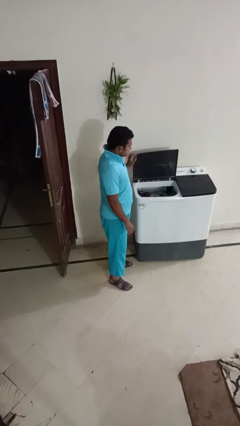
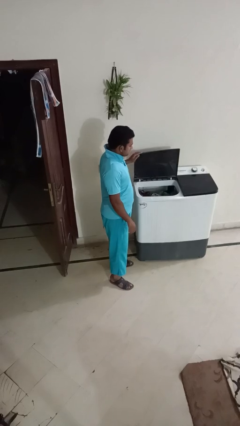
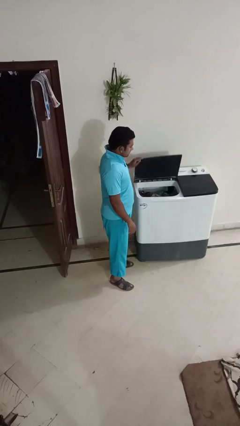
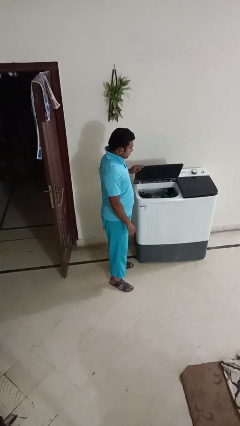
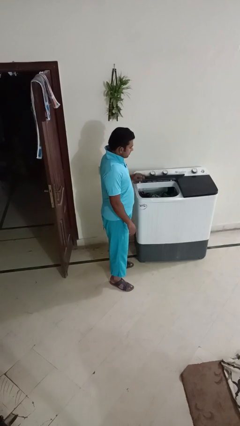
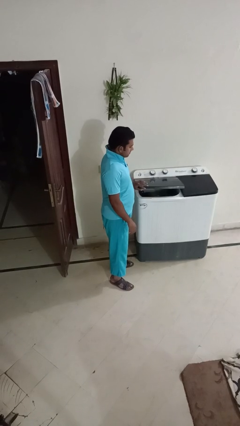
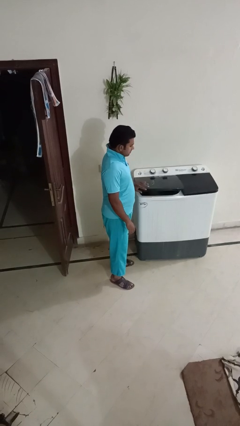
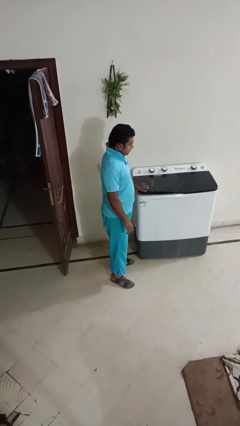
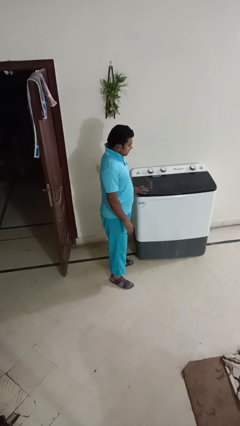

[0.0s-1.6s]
person closes clothes washer

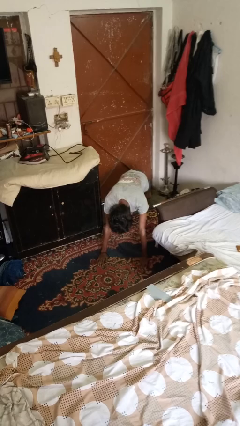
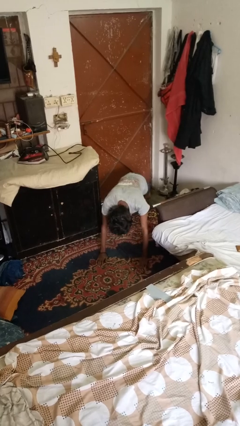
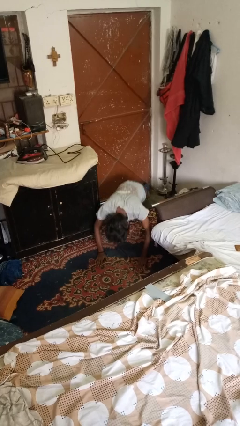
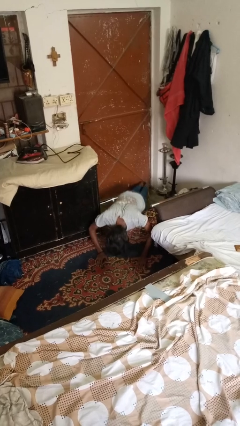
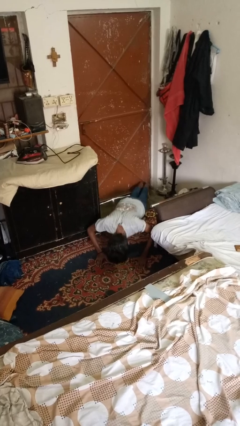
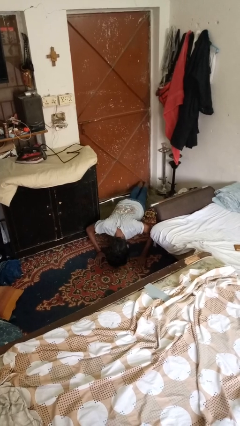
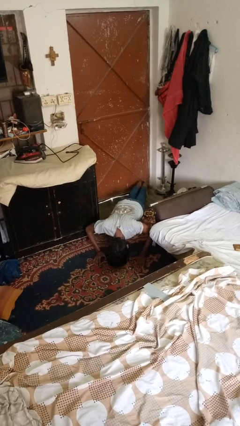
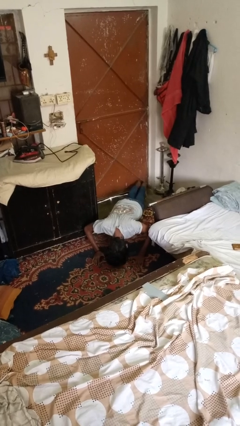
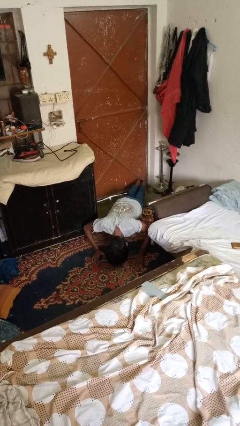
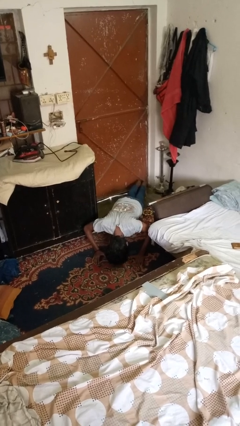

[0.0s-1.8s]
person exercises with pushup

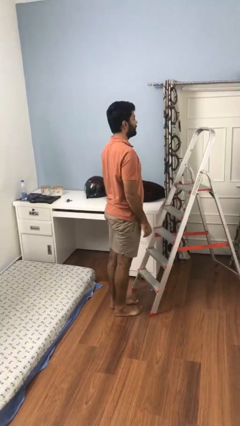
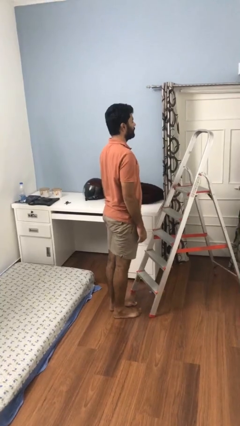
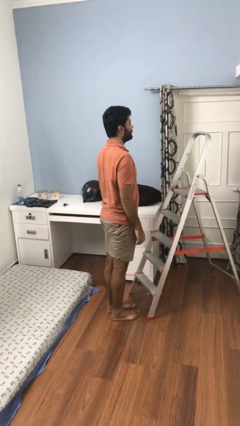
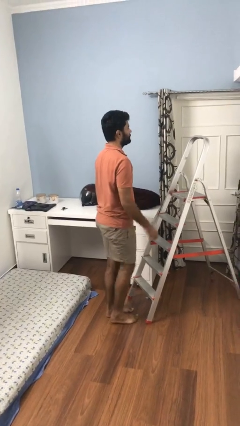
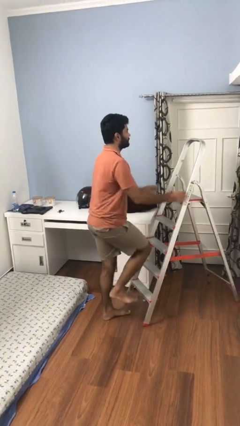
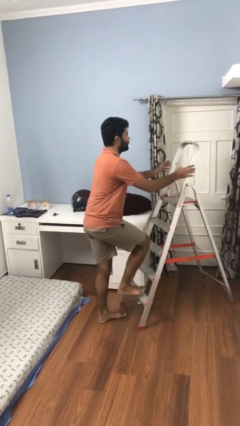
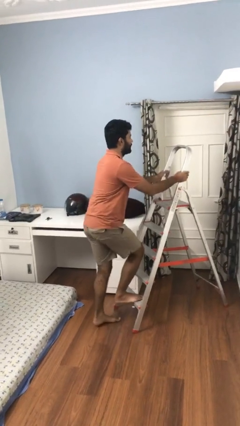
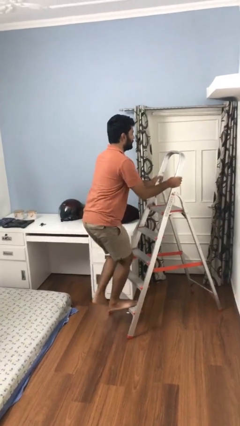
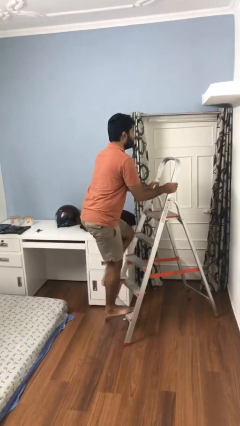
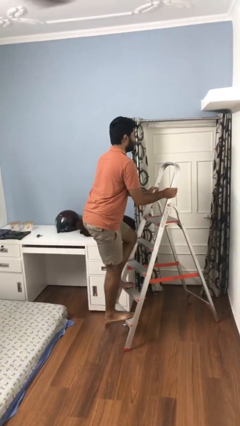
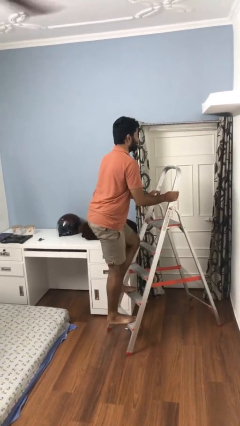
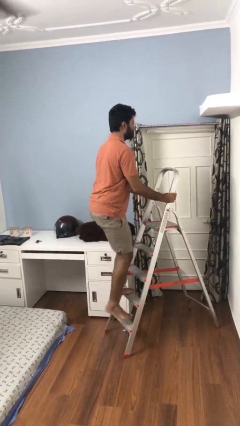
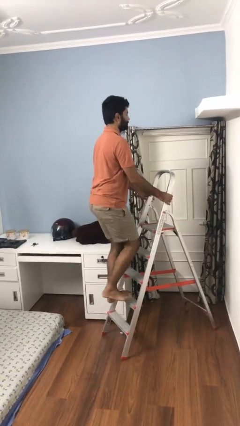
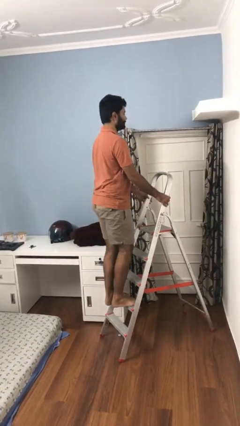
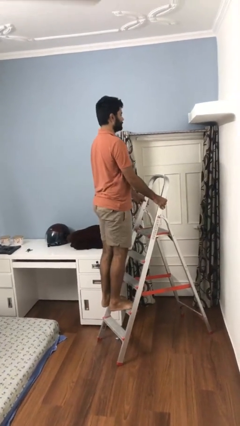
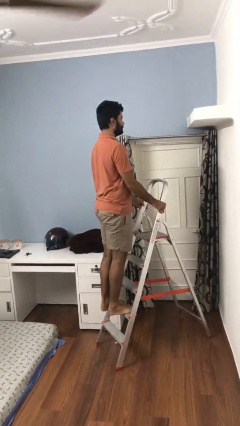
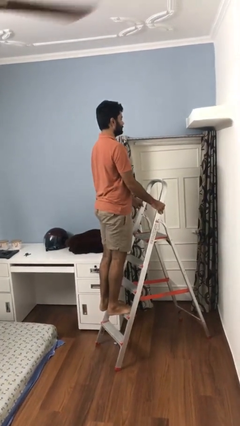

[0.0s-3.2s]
person climbs up ladder

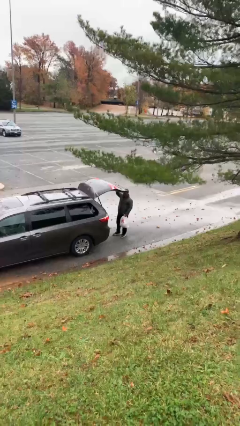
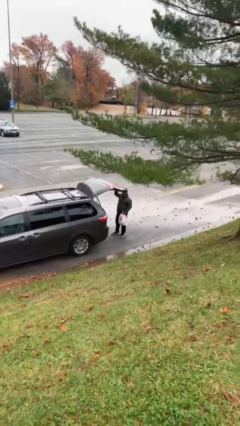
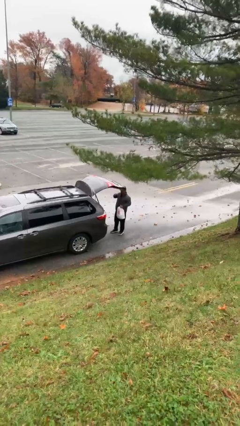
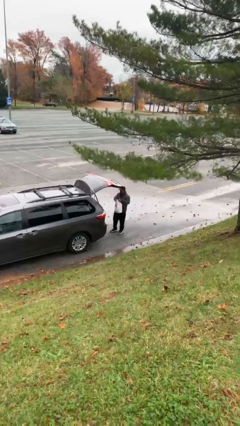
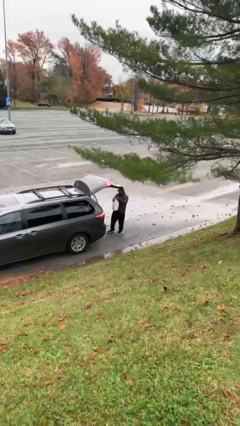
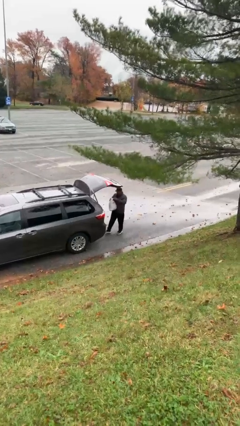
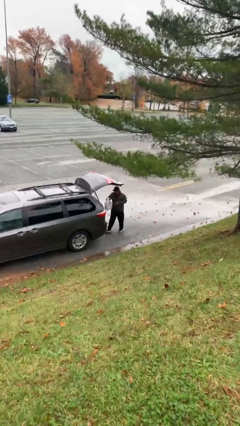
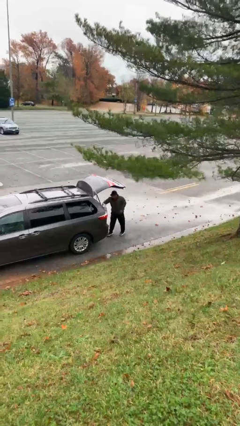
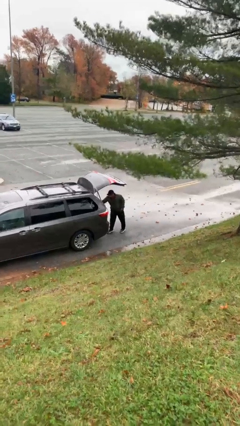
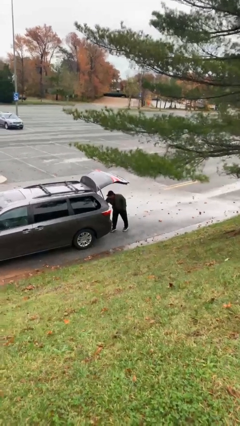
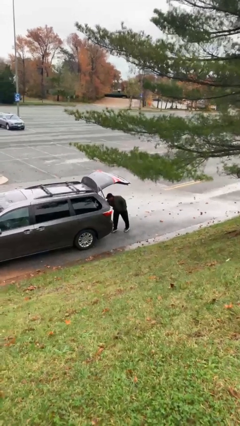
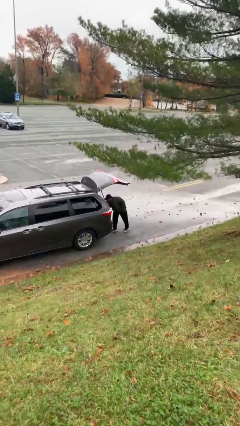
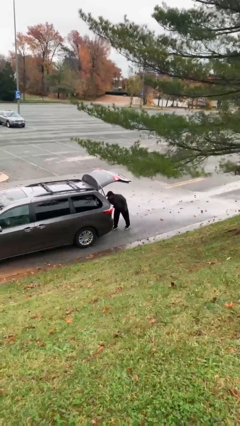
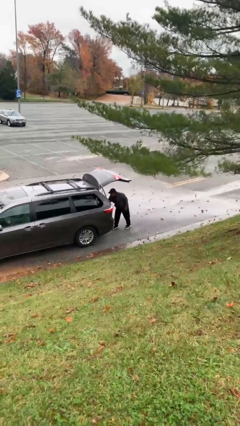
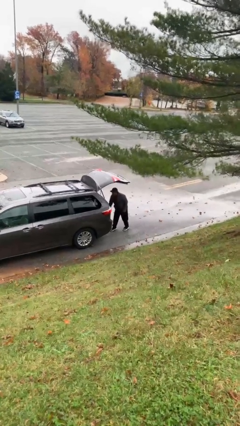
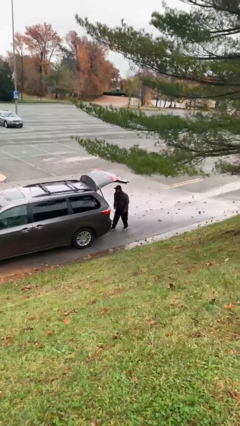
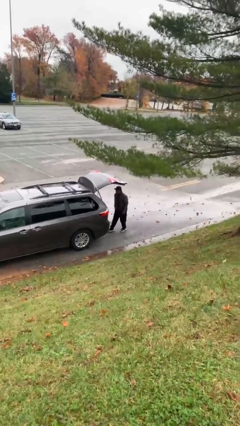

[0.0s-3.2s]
person loads car

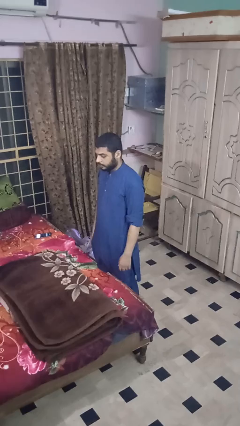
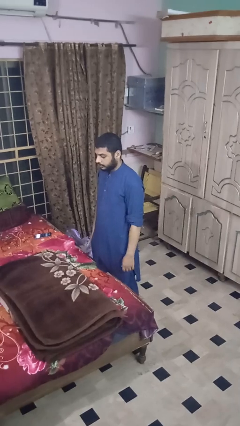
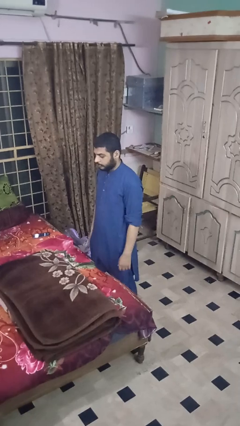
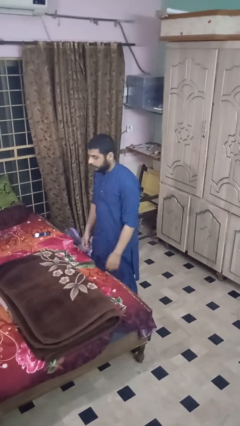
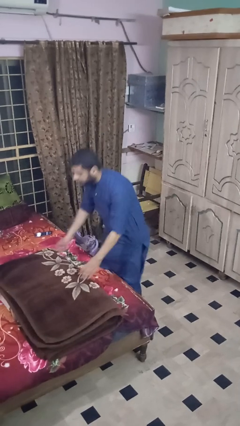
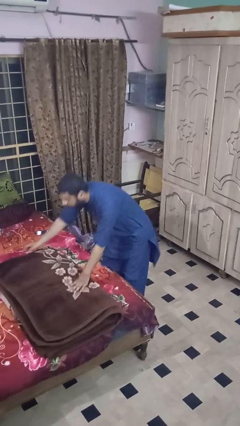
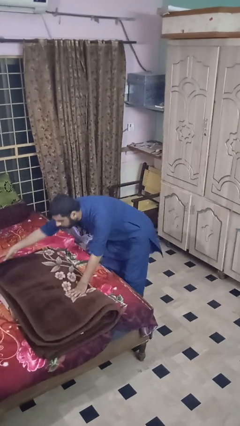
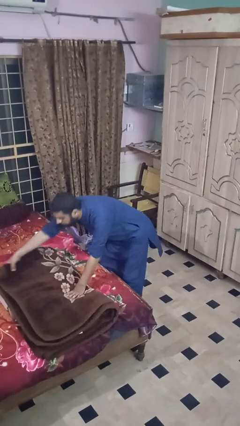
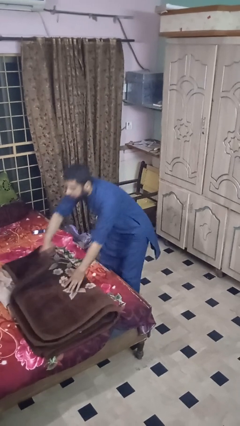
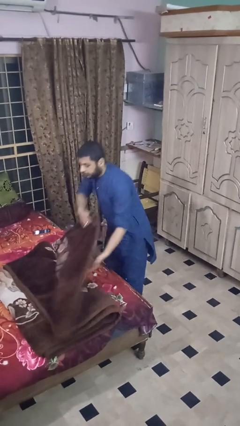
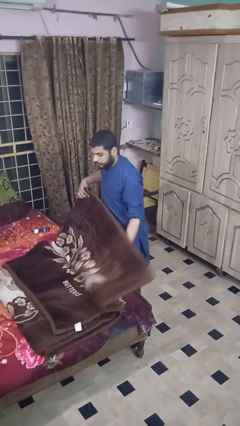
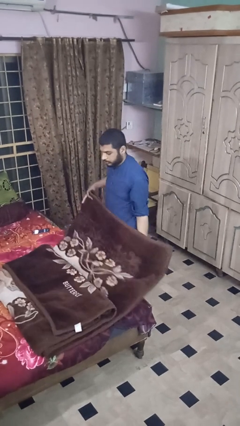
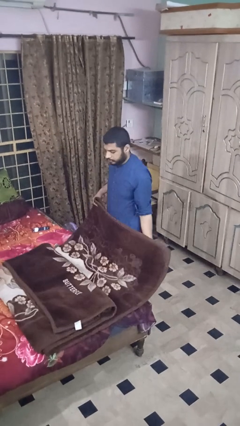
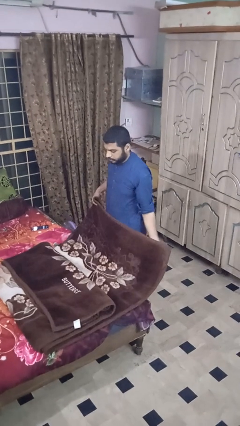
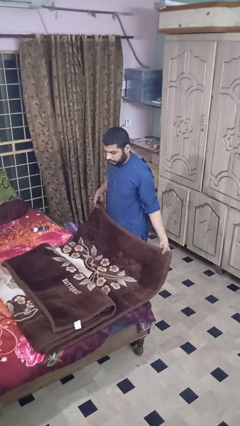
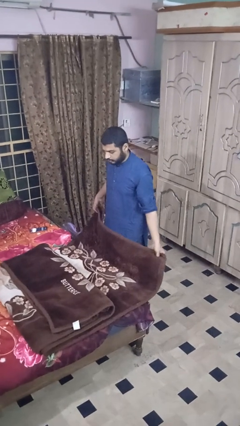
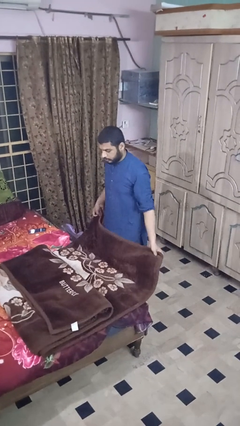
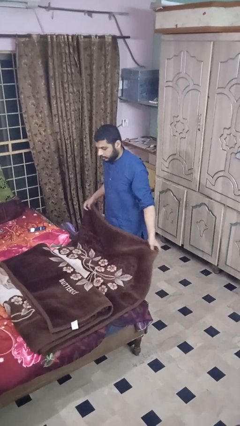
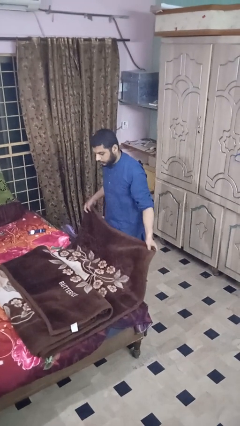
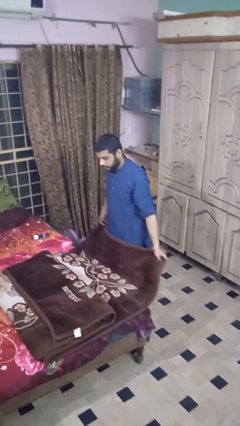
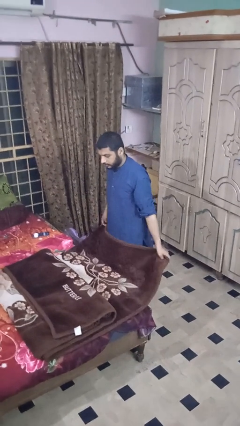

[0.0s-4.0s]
person unfolds blanket

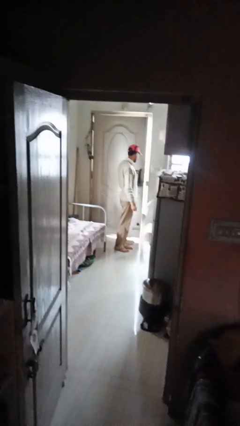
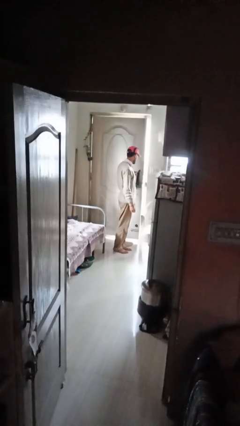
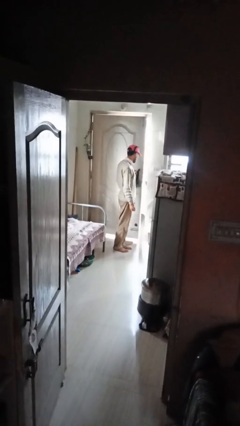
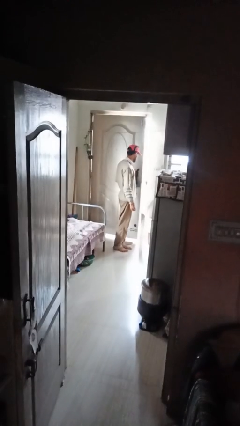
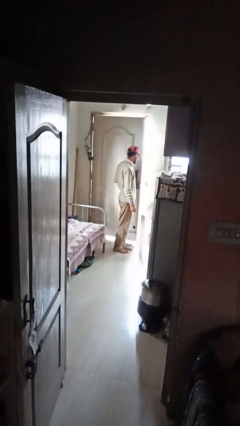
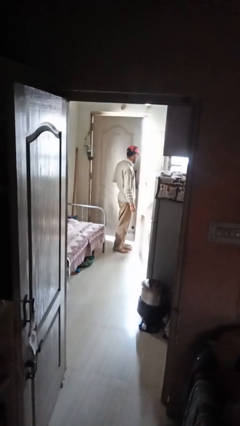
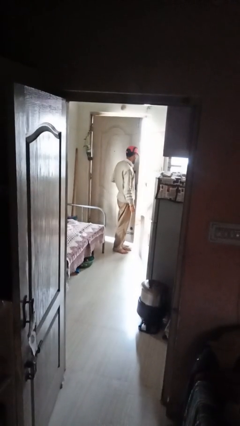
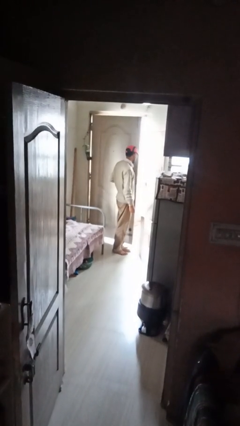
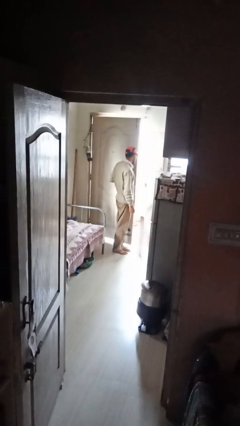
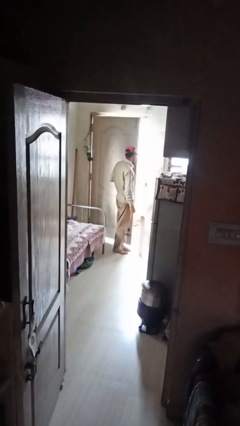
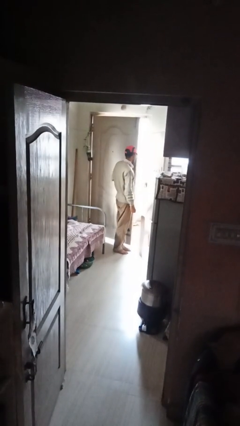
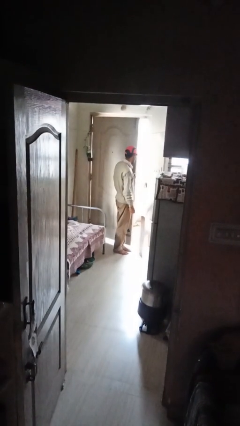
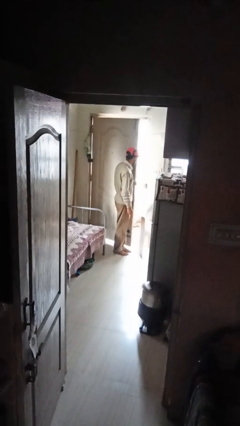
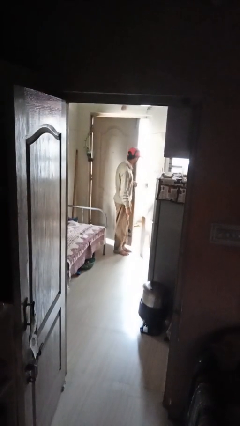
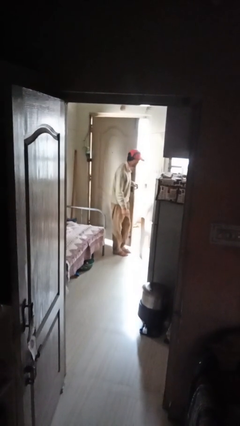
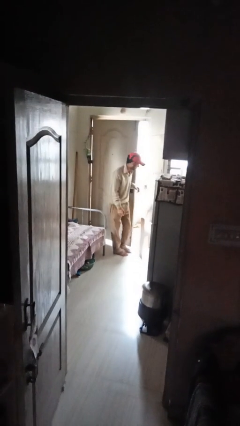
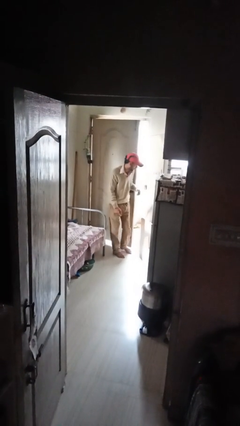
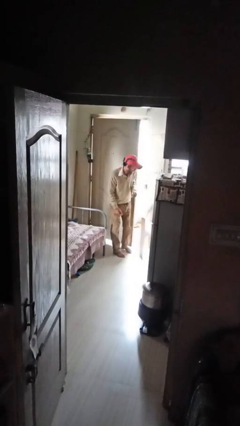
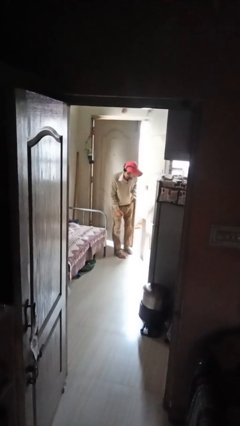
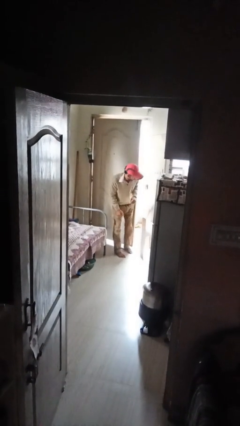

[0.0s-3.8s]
person opens facility door
